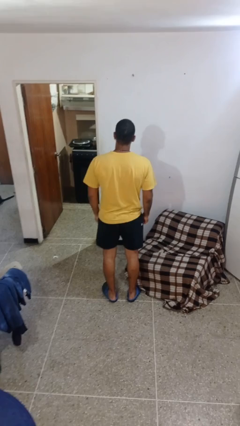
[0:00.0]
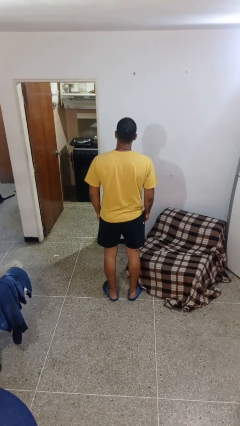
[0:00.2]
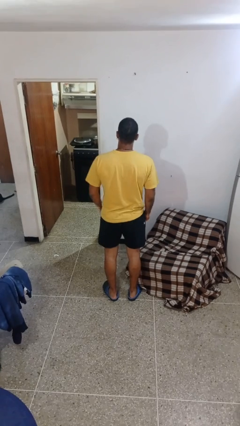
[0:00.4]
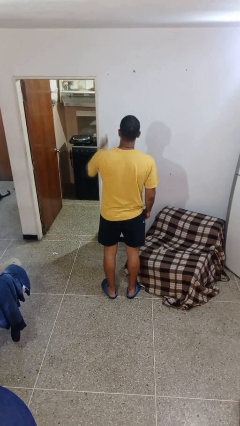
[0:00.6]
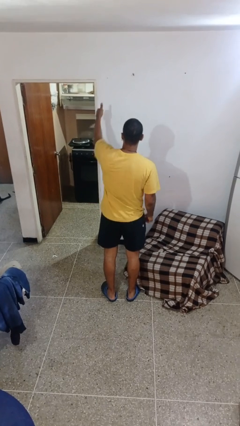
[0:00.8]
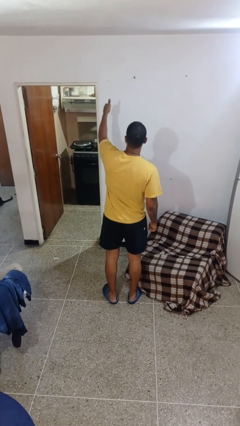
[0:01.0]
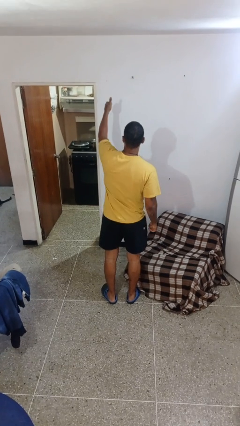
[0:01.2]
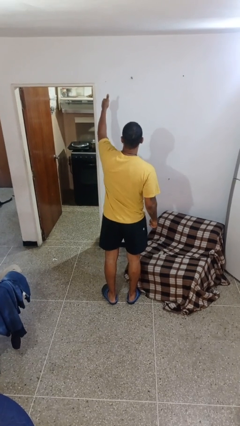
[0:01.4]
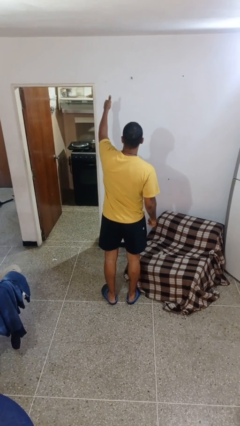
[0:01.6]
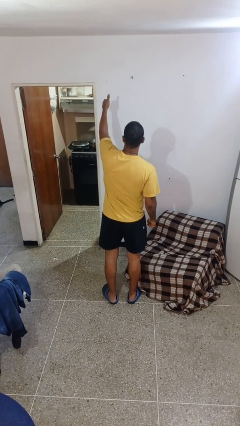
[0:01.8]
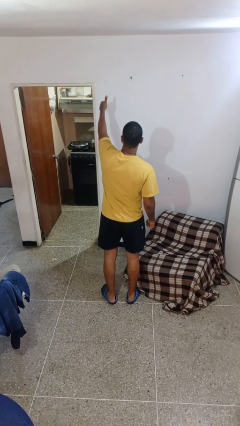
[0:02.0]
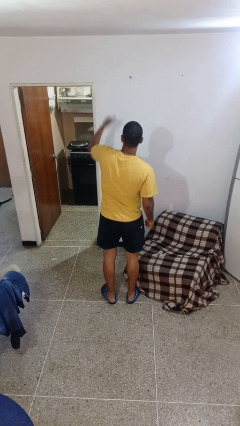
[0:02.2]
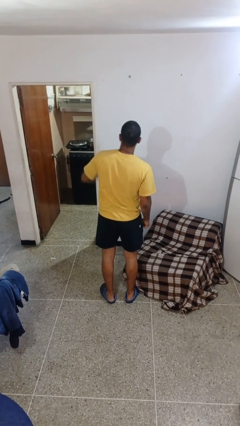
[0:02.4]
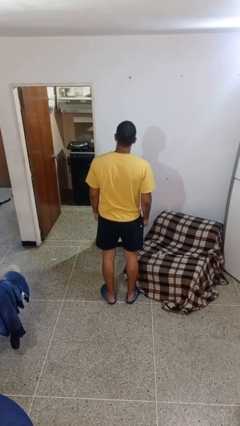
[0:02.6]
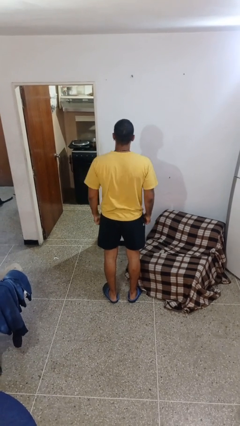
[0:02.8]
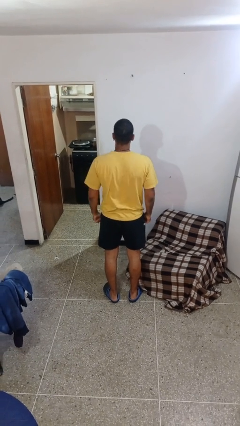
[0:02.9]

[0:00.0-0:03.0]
person gestures thumbs up

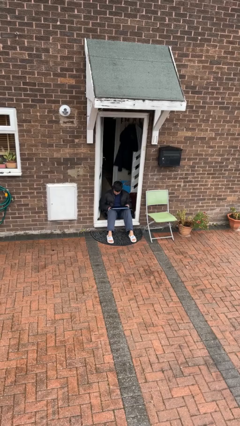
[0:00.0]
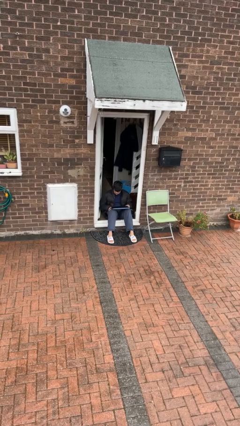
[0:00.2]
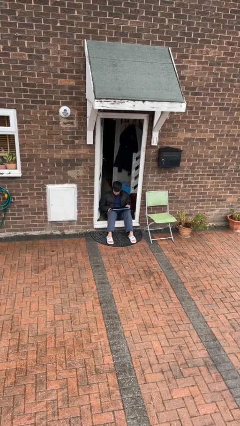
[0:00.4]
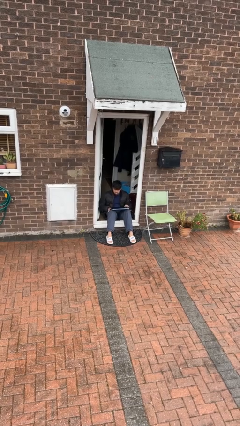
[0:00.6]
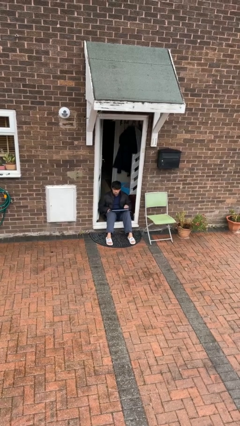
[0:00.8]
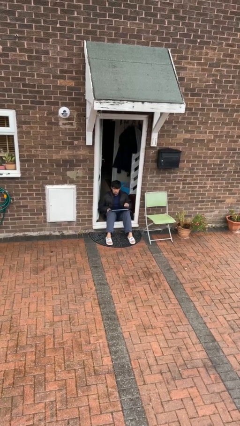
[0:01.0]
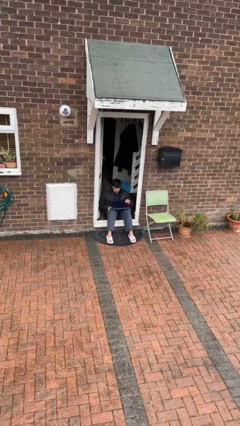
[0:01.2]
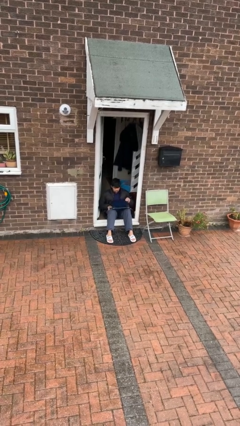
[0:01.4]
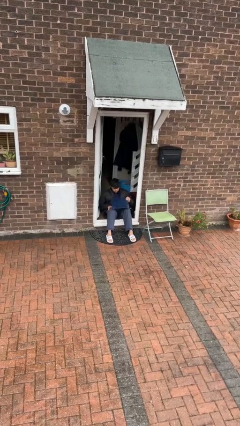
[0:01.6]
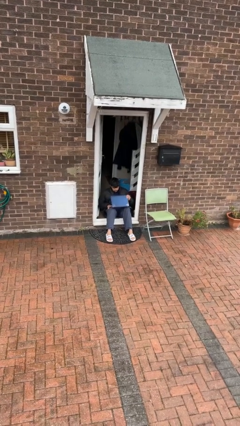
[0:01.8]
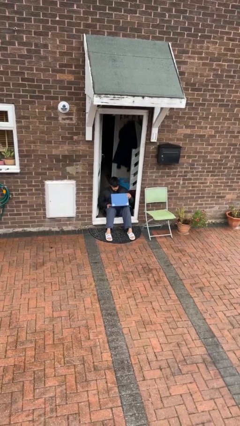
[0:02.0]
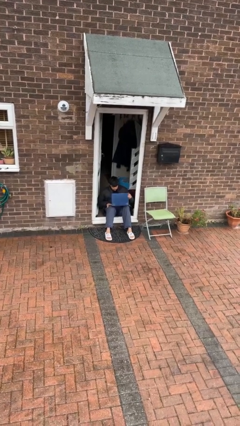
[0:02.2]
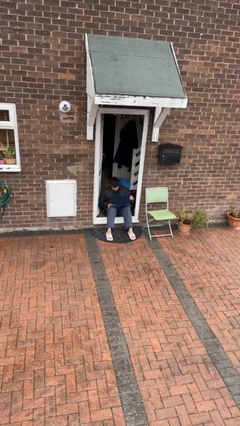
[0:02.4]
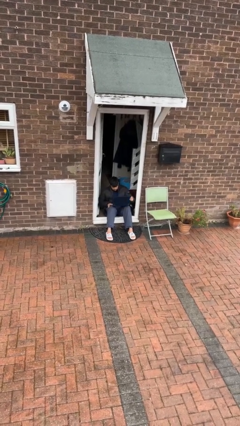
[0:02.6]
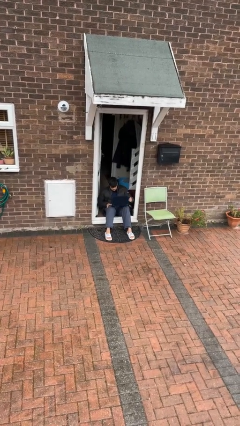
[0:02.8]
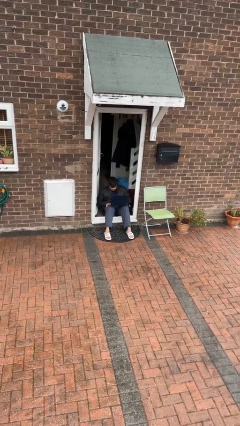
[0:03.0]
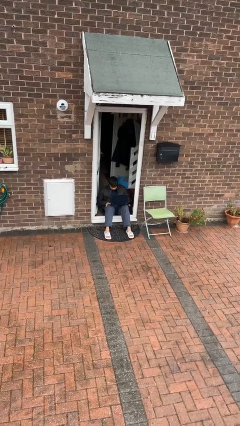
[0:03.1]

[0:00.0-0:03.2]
person opens laptop

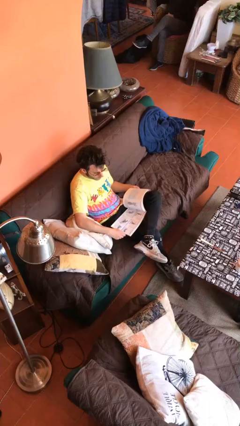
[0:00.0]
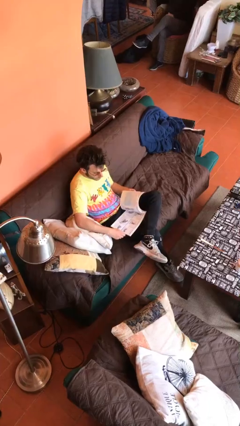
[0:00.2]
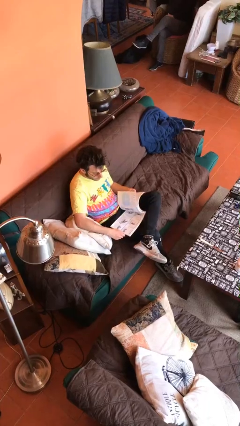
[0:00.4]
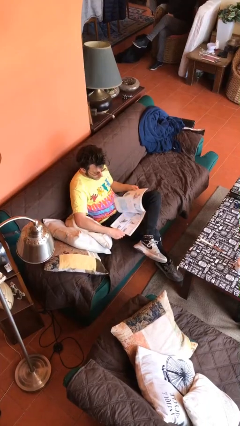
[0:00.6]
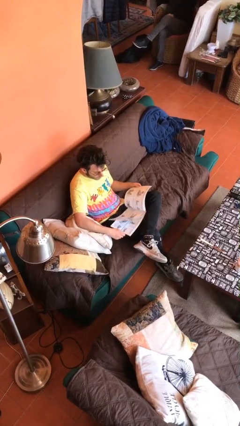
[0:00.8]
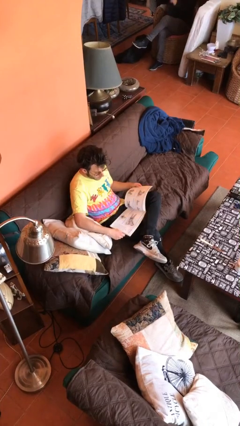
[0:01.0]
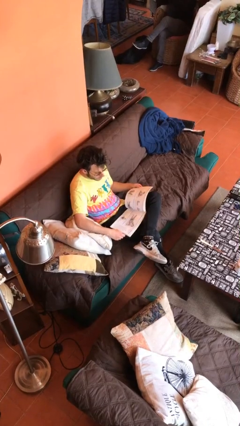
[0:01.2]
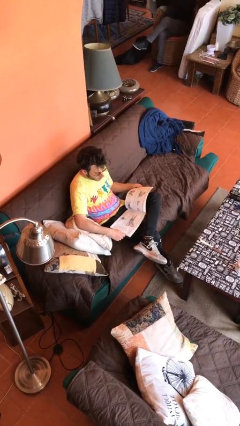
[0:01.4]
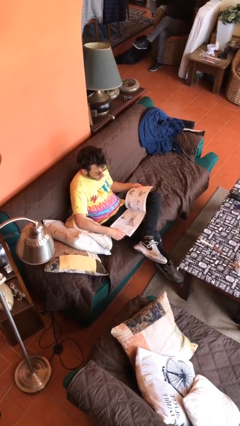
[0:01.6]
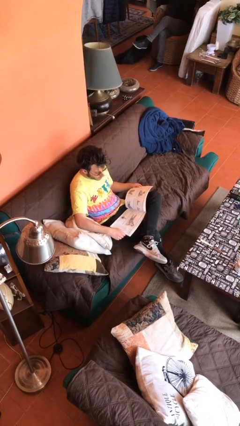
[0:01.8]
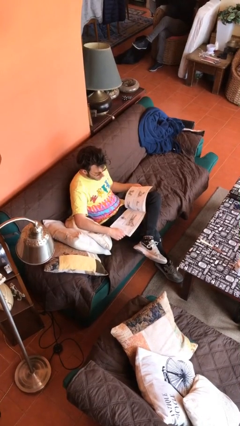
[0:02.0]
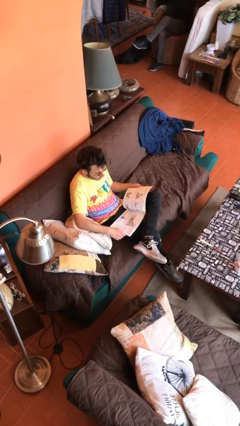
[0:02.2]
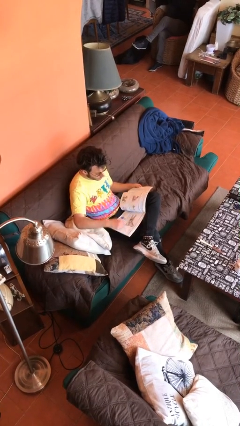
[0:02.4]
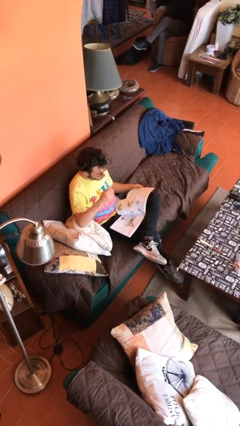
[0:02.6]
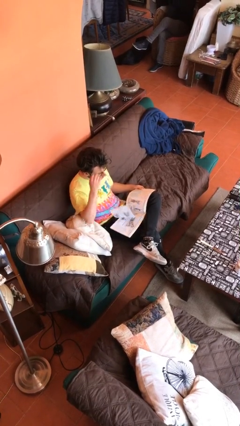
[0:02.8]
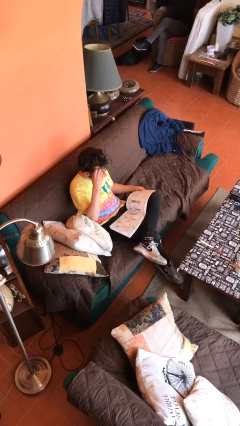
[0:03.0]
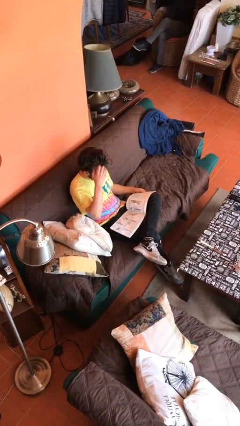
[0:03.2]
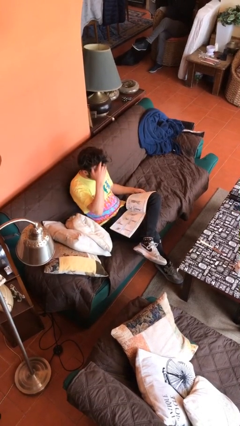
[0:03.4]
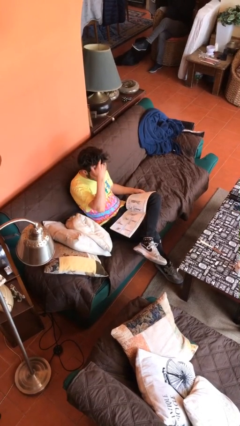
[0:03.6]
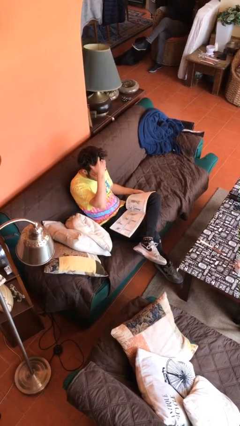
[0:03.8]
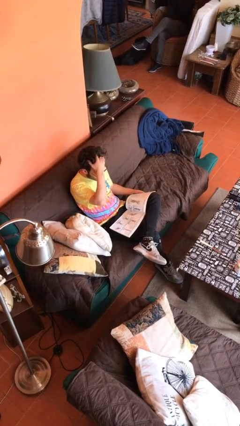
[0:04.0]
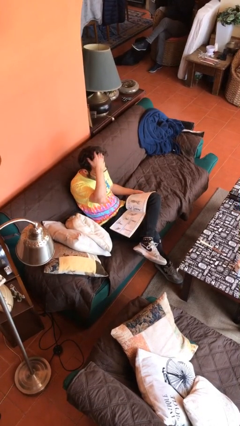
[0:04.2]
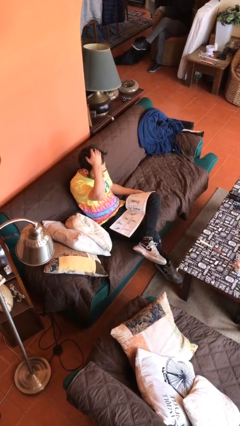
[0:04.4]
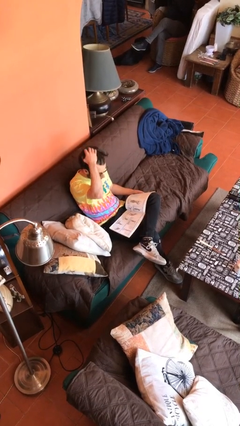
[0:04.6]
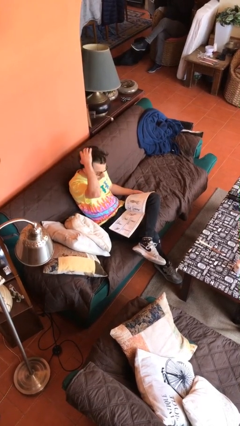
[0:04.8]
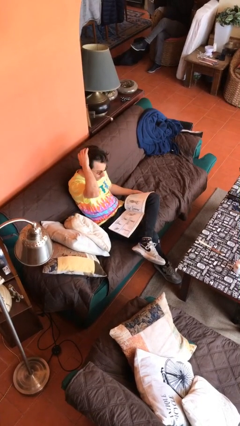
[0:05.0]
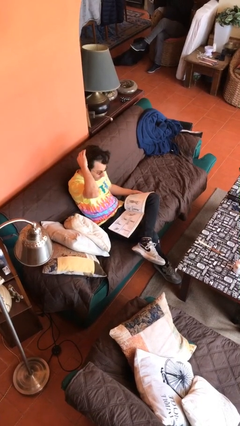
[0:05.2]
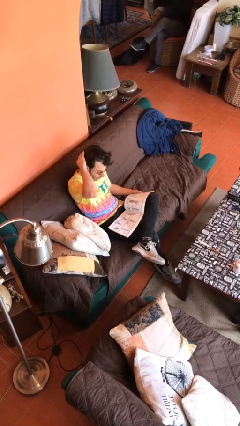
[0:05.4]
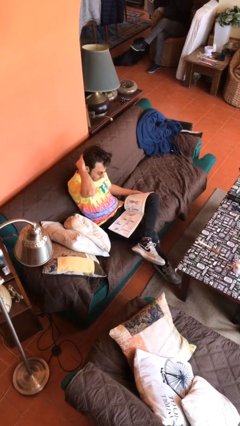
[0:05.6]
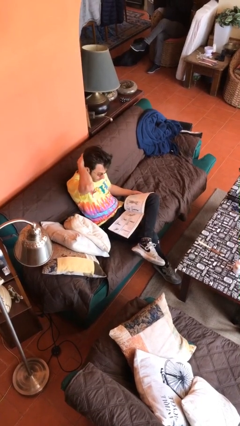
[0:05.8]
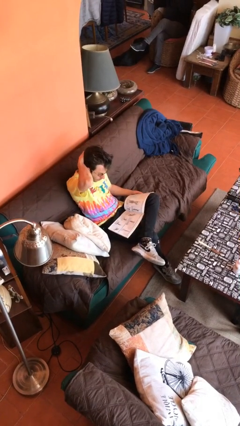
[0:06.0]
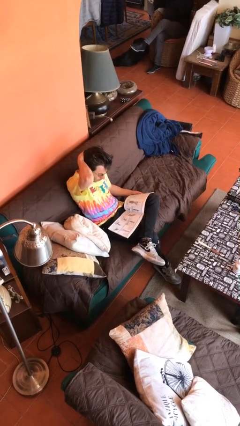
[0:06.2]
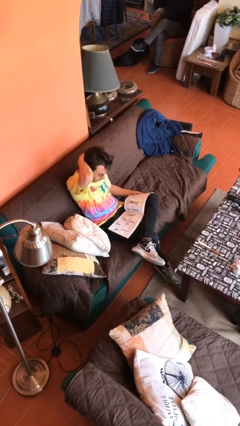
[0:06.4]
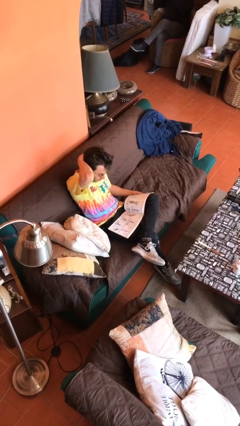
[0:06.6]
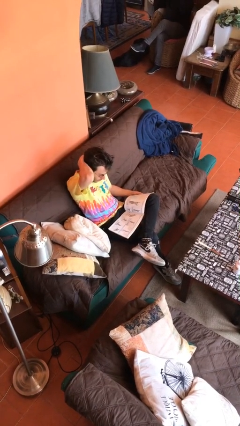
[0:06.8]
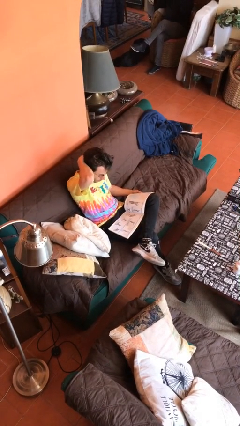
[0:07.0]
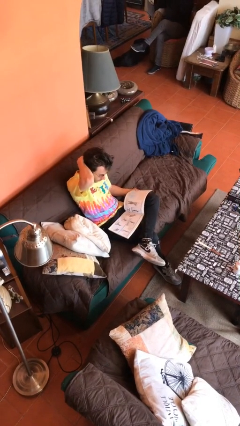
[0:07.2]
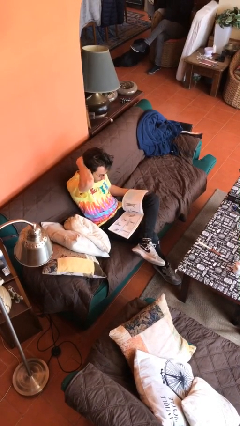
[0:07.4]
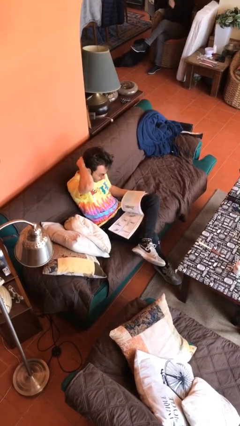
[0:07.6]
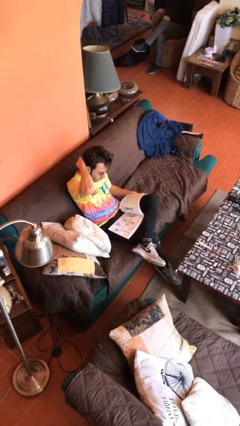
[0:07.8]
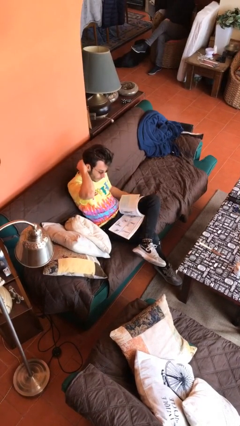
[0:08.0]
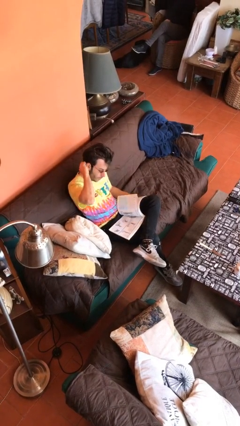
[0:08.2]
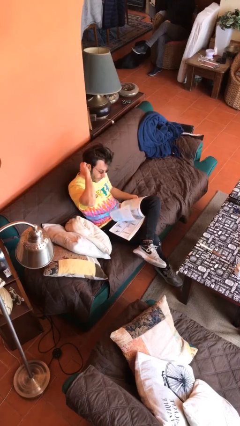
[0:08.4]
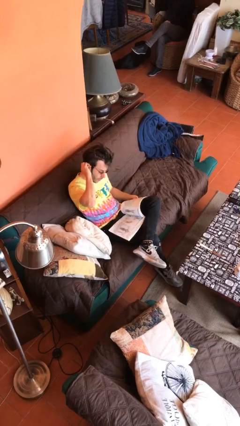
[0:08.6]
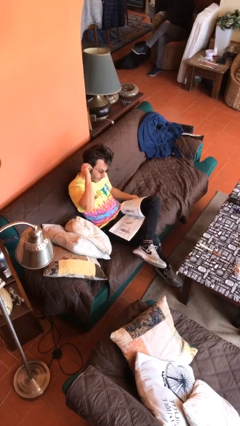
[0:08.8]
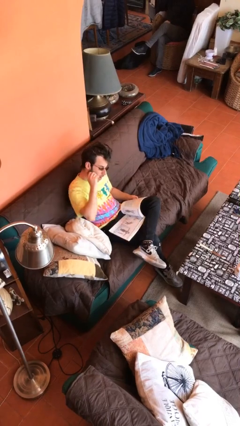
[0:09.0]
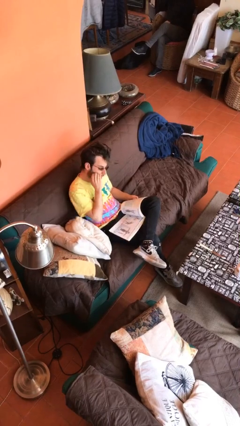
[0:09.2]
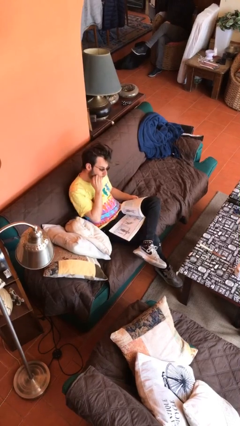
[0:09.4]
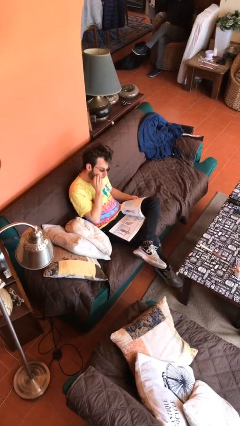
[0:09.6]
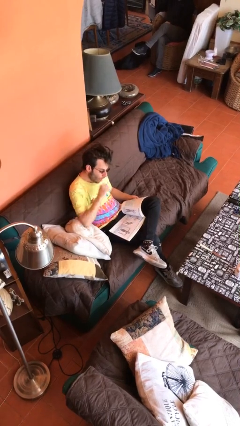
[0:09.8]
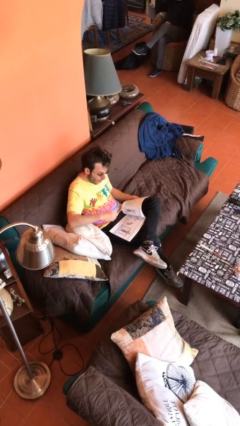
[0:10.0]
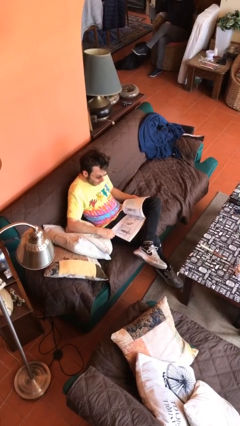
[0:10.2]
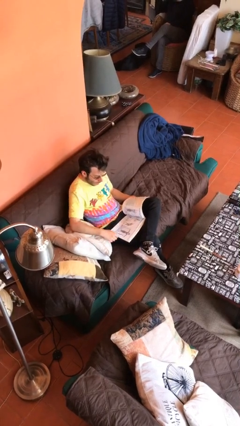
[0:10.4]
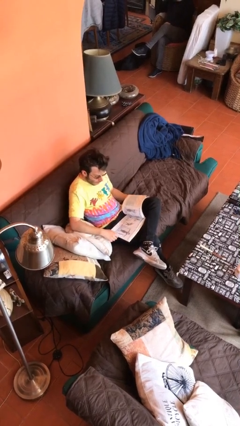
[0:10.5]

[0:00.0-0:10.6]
person reads document

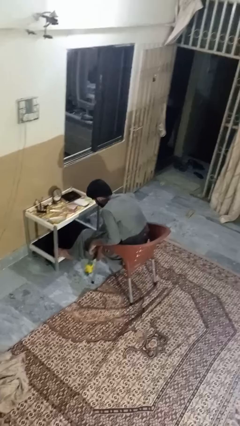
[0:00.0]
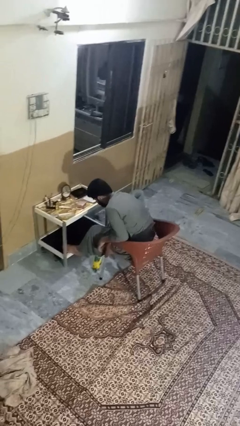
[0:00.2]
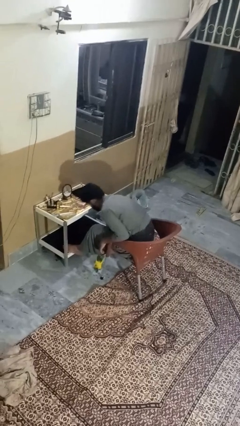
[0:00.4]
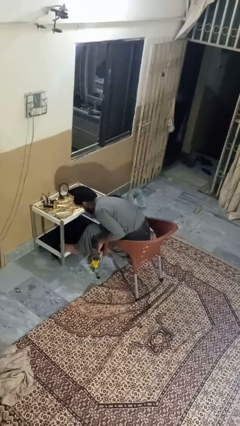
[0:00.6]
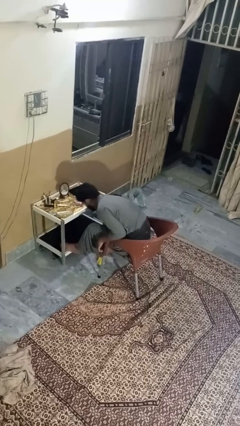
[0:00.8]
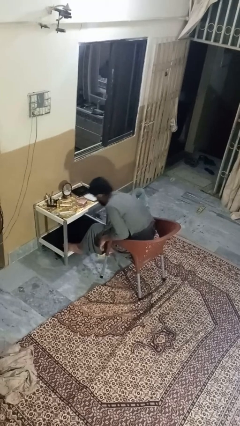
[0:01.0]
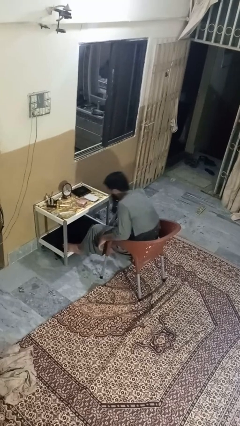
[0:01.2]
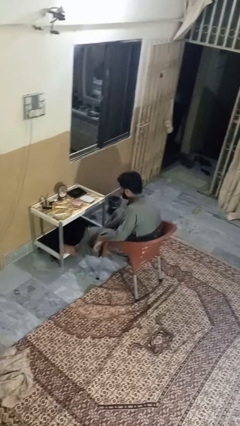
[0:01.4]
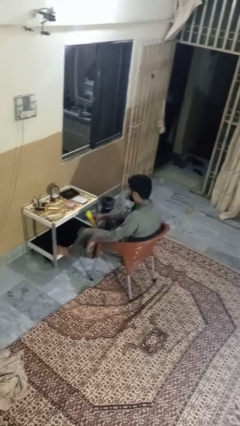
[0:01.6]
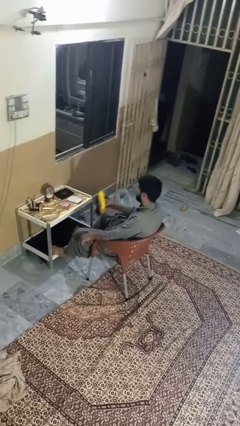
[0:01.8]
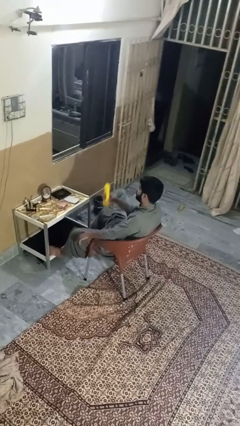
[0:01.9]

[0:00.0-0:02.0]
person picks up object from floor
